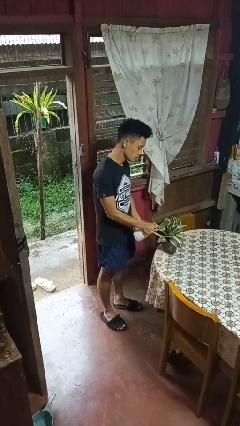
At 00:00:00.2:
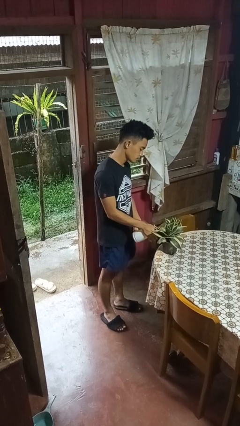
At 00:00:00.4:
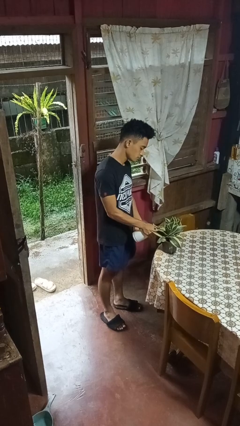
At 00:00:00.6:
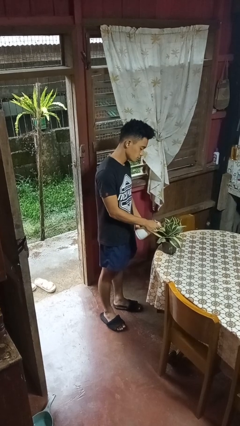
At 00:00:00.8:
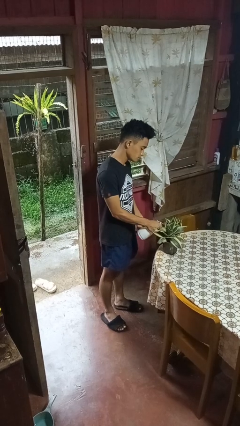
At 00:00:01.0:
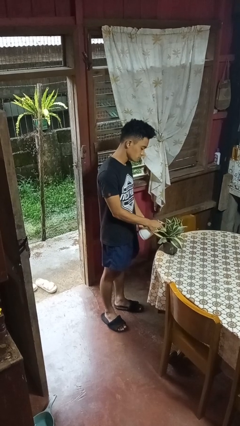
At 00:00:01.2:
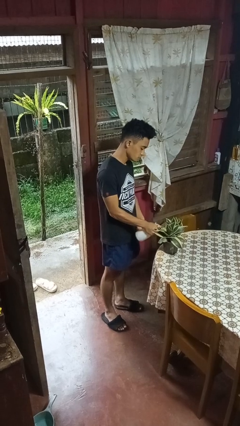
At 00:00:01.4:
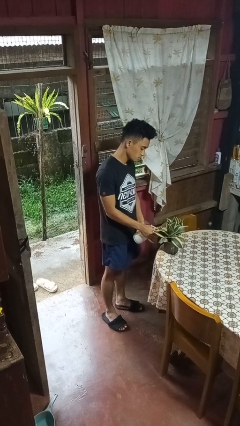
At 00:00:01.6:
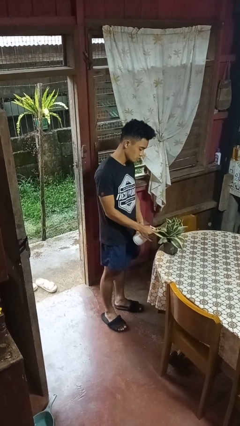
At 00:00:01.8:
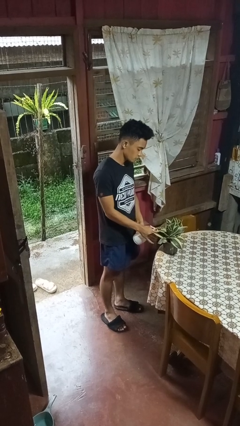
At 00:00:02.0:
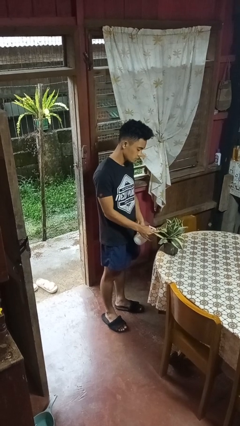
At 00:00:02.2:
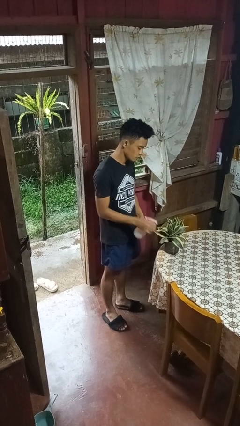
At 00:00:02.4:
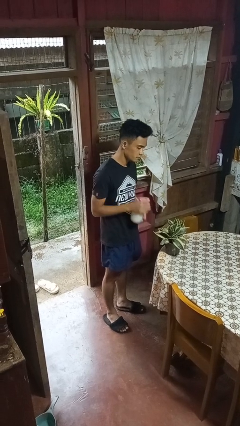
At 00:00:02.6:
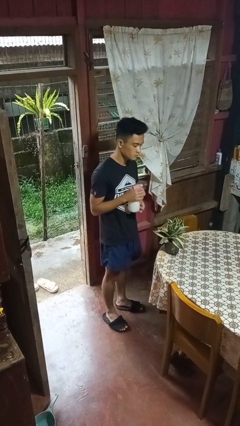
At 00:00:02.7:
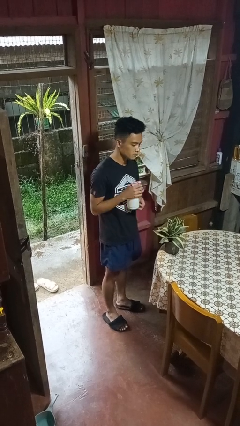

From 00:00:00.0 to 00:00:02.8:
person waters houseplant

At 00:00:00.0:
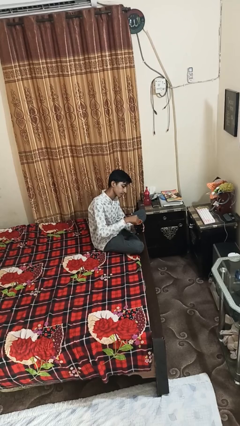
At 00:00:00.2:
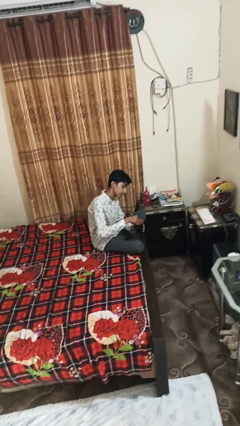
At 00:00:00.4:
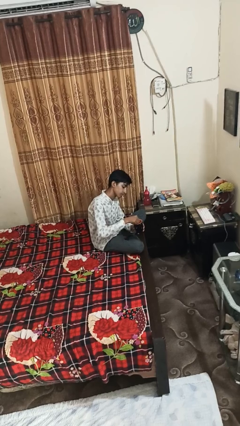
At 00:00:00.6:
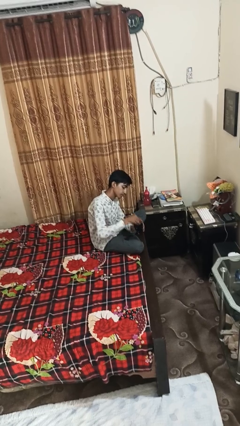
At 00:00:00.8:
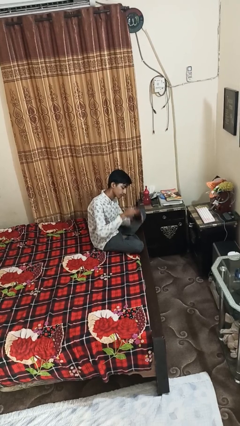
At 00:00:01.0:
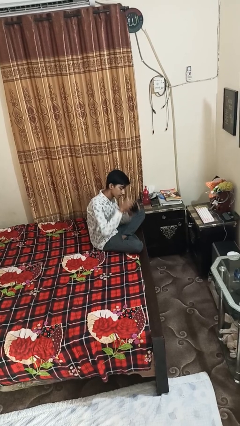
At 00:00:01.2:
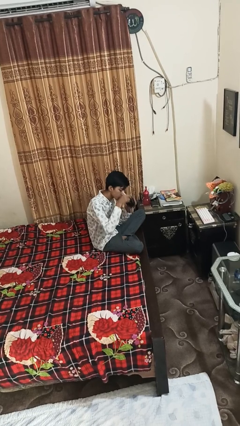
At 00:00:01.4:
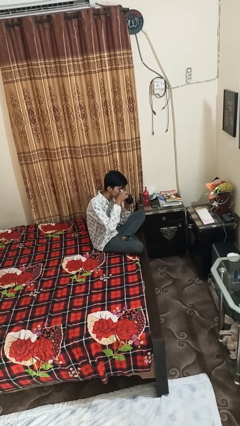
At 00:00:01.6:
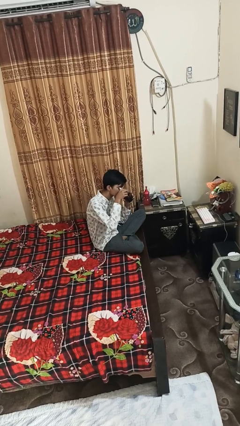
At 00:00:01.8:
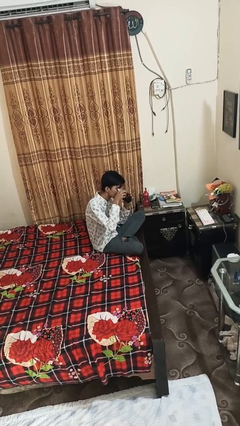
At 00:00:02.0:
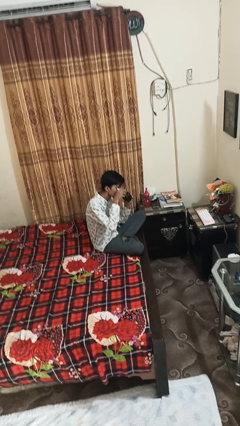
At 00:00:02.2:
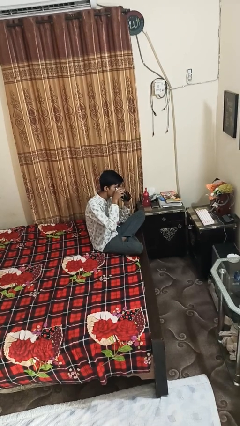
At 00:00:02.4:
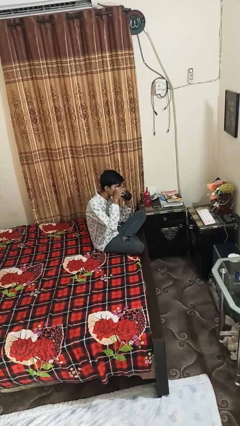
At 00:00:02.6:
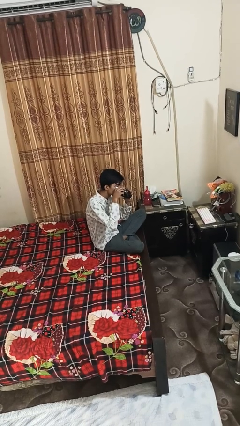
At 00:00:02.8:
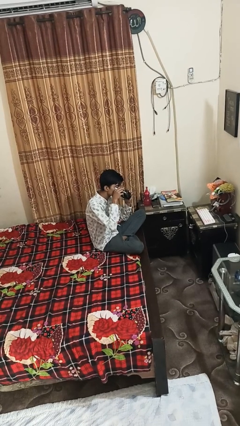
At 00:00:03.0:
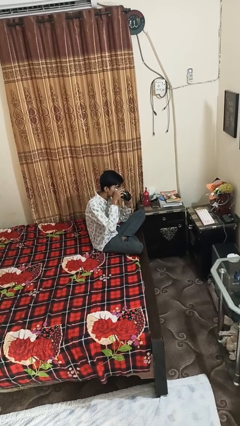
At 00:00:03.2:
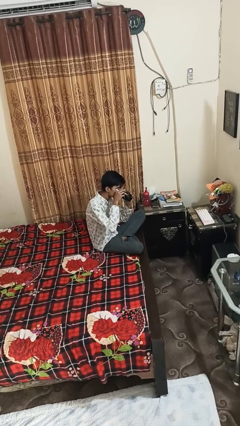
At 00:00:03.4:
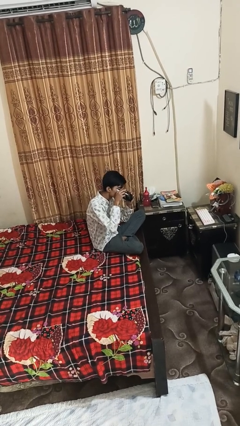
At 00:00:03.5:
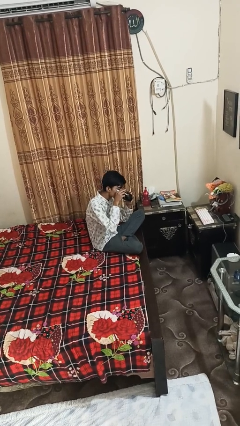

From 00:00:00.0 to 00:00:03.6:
person drinks from mug

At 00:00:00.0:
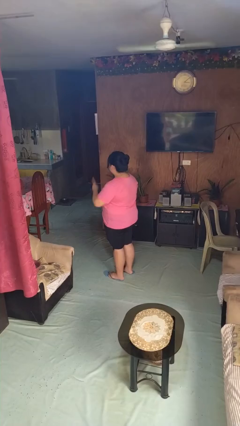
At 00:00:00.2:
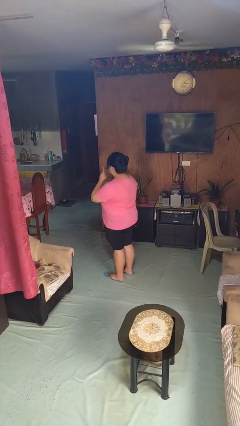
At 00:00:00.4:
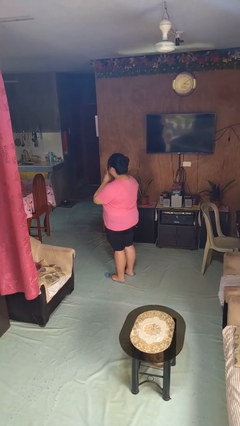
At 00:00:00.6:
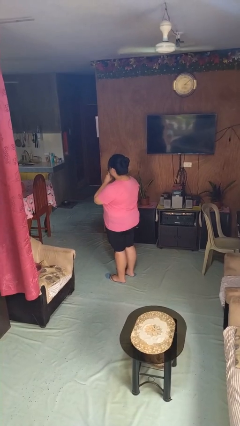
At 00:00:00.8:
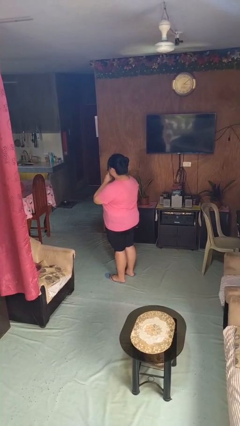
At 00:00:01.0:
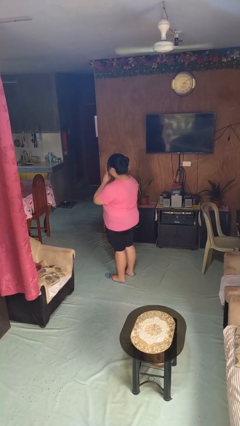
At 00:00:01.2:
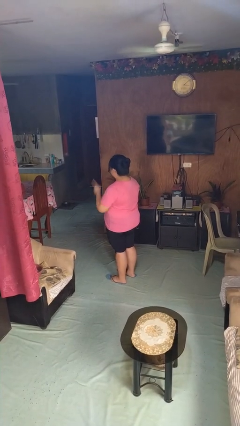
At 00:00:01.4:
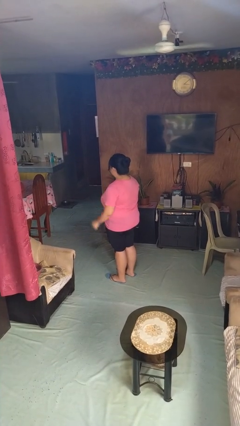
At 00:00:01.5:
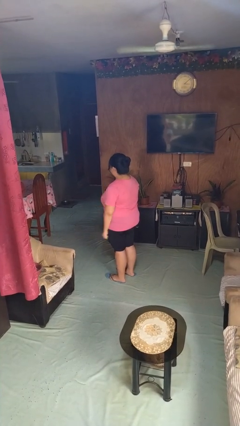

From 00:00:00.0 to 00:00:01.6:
person gestures be quiet

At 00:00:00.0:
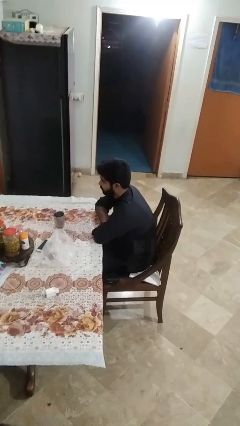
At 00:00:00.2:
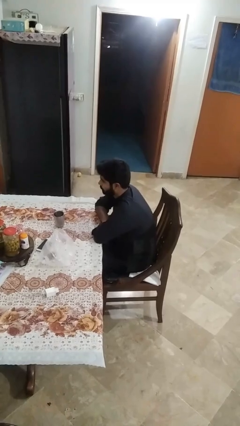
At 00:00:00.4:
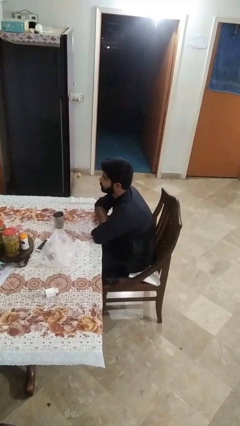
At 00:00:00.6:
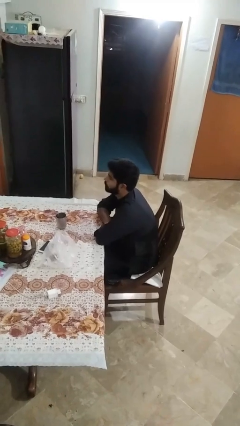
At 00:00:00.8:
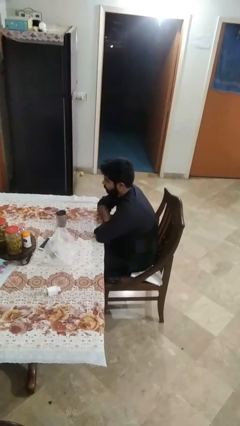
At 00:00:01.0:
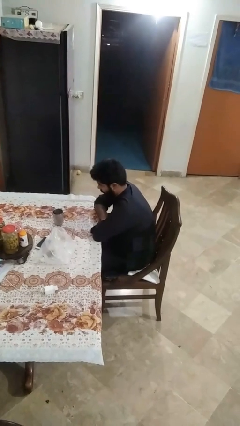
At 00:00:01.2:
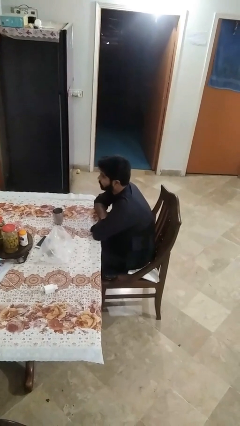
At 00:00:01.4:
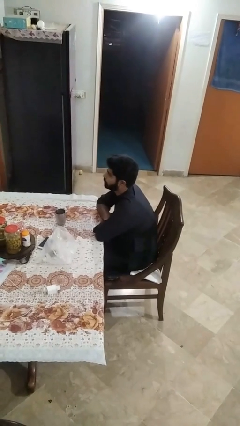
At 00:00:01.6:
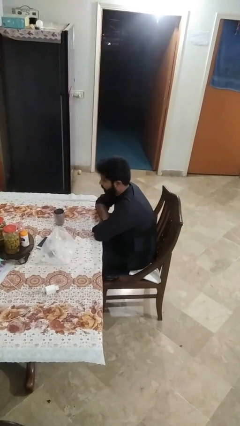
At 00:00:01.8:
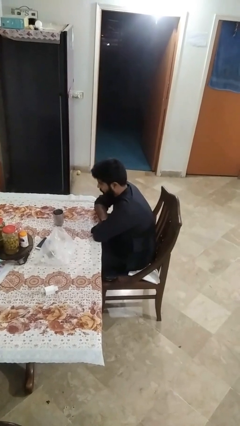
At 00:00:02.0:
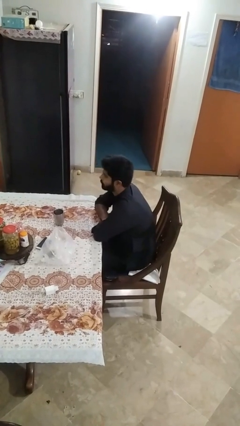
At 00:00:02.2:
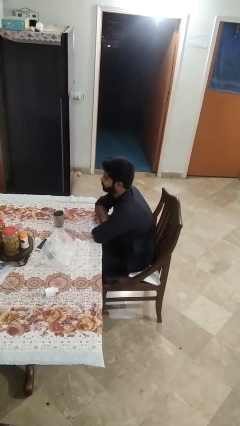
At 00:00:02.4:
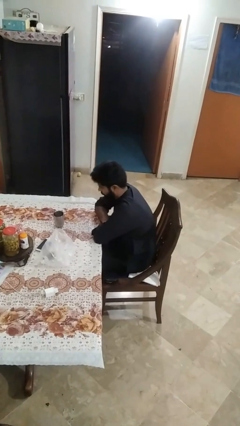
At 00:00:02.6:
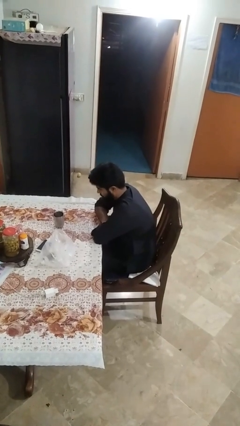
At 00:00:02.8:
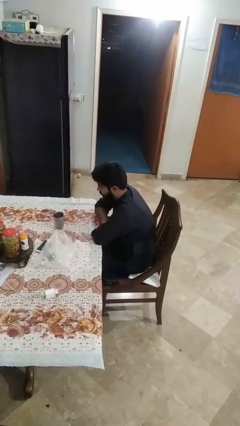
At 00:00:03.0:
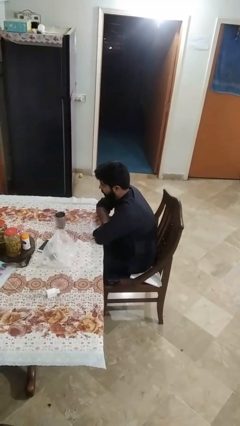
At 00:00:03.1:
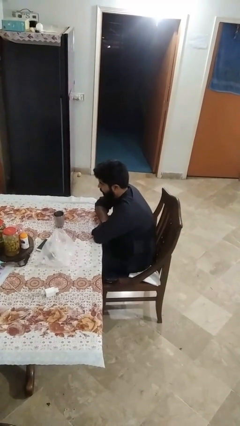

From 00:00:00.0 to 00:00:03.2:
person nods head

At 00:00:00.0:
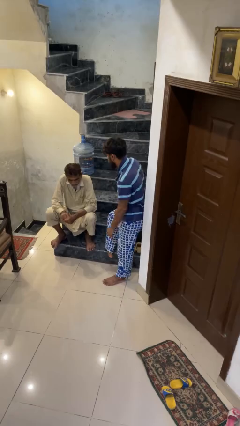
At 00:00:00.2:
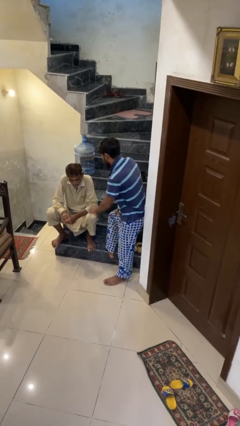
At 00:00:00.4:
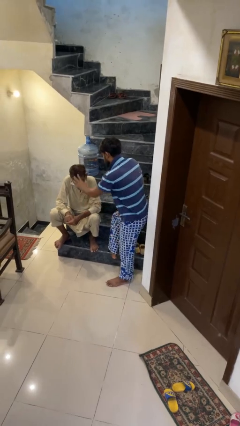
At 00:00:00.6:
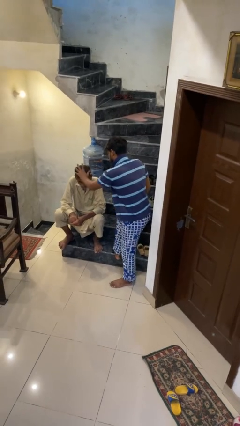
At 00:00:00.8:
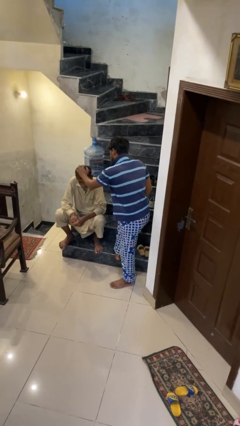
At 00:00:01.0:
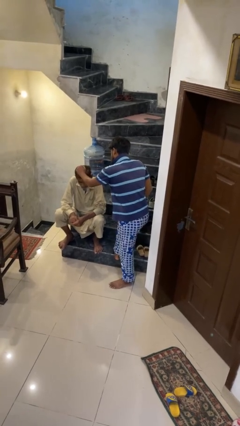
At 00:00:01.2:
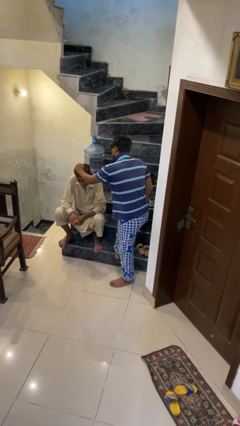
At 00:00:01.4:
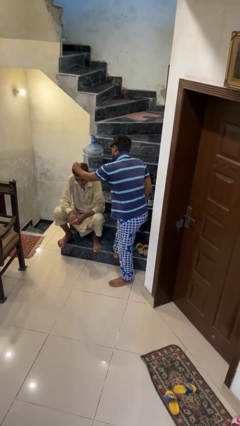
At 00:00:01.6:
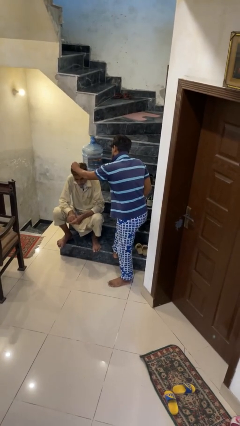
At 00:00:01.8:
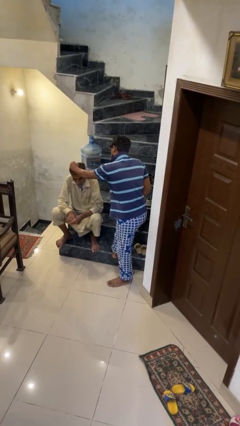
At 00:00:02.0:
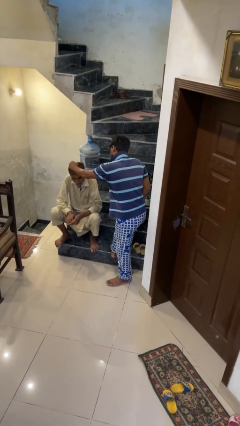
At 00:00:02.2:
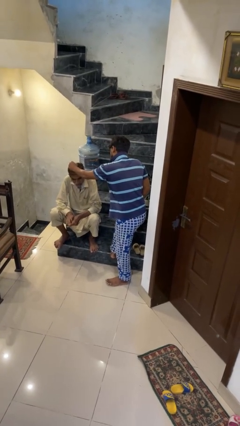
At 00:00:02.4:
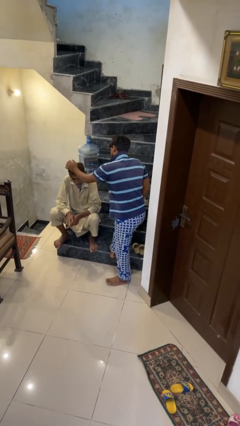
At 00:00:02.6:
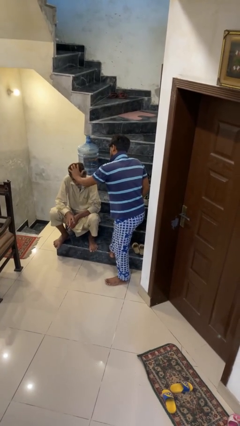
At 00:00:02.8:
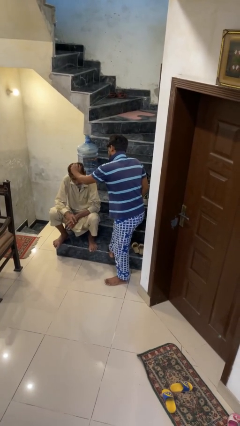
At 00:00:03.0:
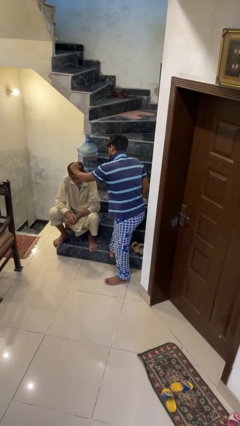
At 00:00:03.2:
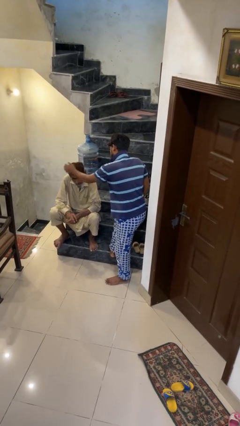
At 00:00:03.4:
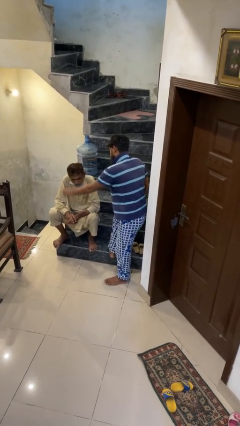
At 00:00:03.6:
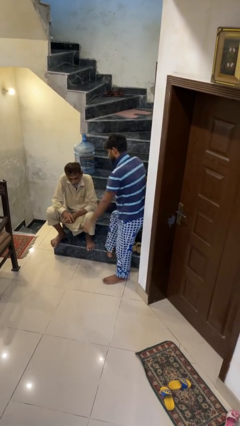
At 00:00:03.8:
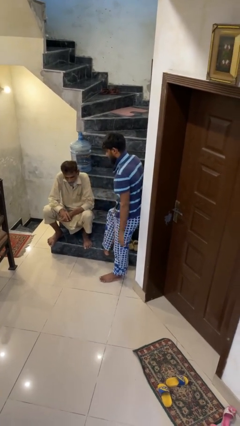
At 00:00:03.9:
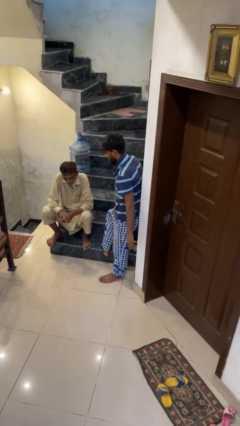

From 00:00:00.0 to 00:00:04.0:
person grabs person by hair

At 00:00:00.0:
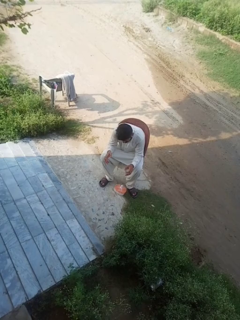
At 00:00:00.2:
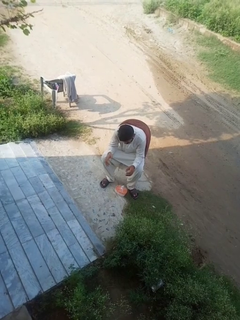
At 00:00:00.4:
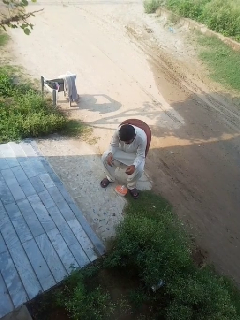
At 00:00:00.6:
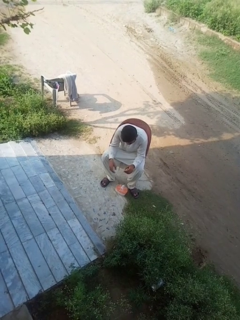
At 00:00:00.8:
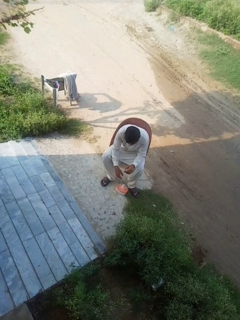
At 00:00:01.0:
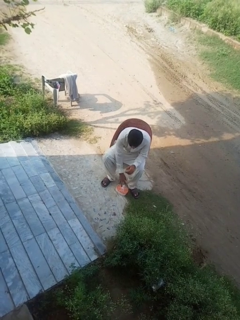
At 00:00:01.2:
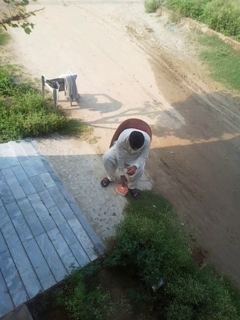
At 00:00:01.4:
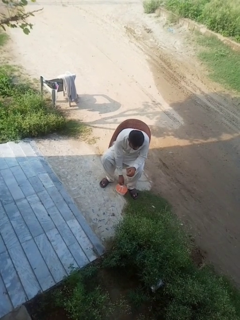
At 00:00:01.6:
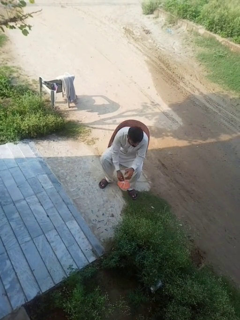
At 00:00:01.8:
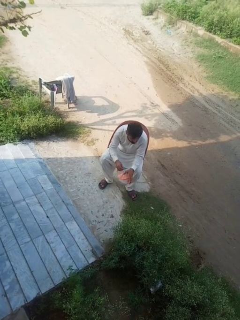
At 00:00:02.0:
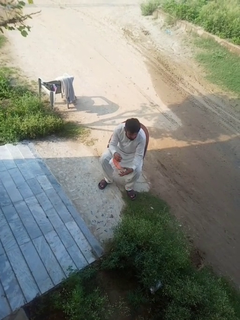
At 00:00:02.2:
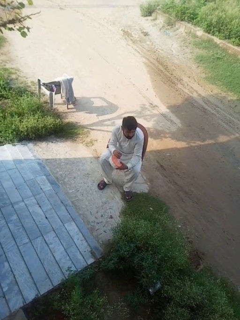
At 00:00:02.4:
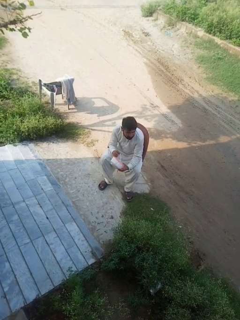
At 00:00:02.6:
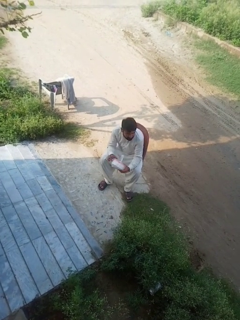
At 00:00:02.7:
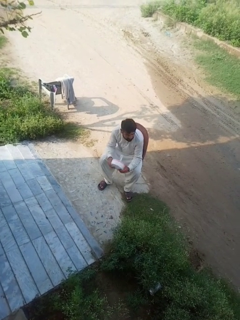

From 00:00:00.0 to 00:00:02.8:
person picks up object from floor
